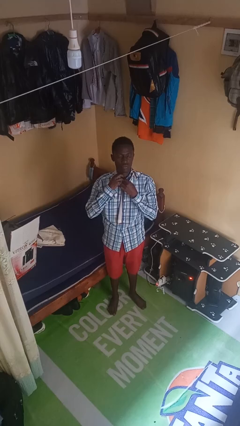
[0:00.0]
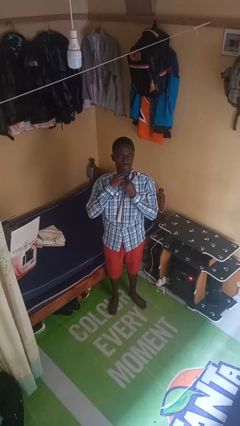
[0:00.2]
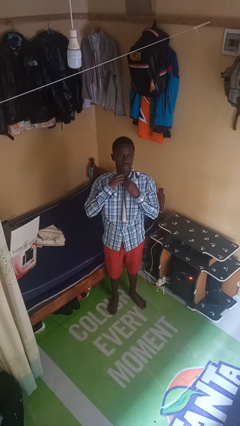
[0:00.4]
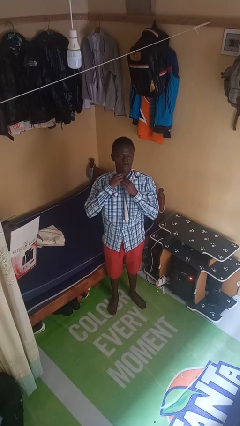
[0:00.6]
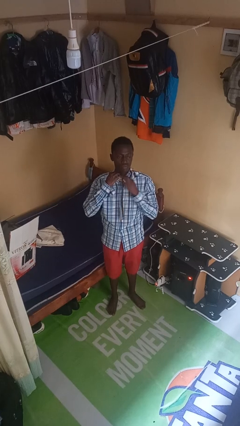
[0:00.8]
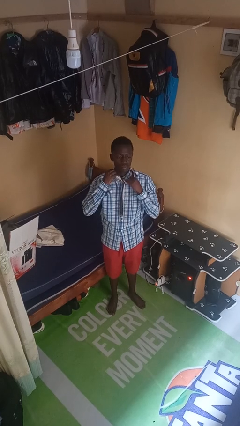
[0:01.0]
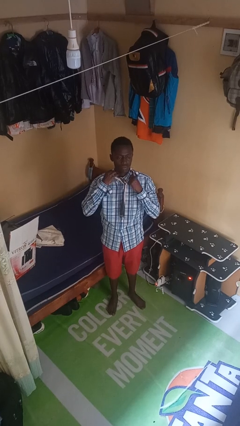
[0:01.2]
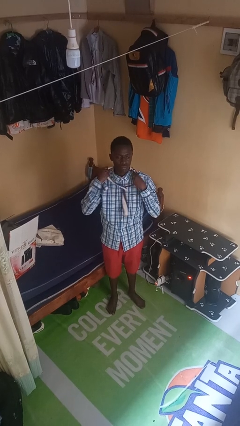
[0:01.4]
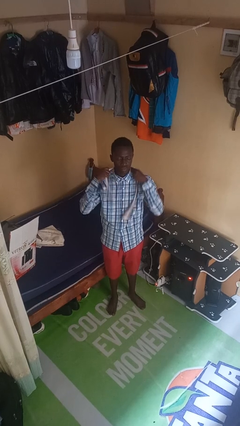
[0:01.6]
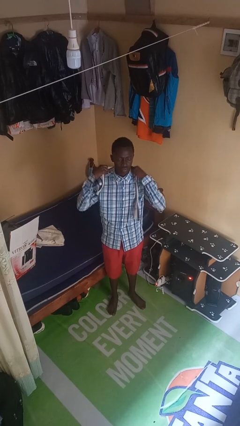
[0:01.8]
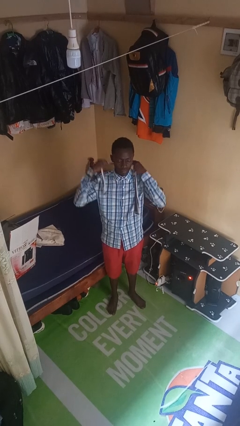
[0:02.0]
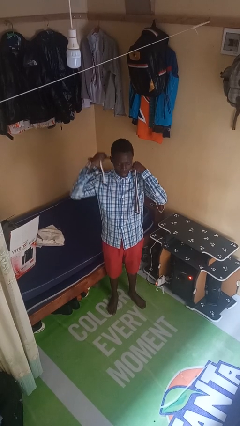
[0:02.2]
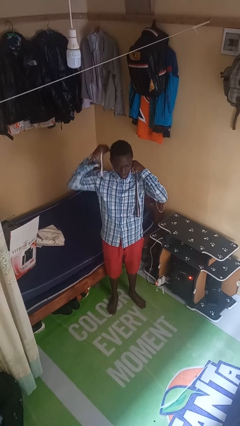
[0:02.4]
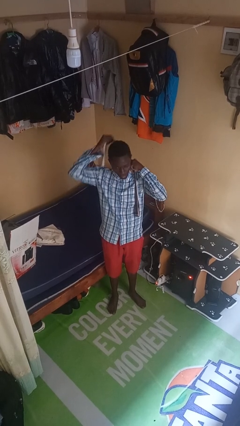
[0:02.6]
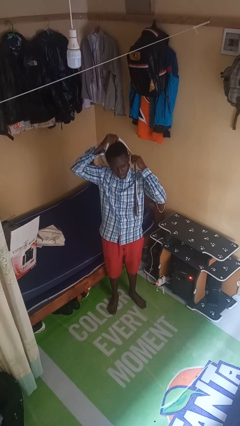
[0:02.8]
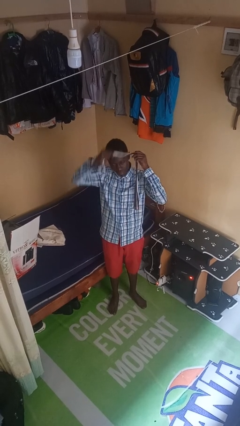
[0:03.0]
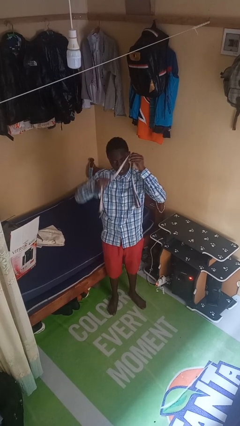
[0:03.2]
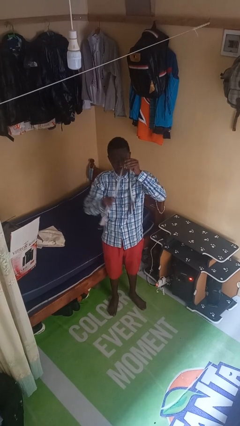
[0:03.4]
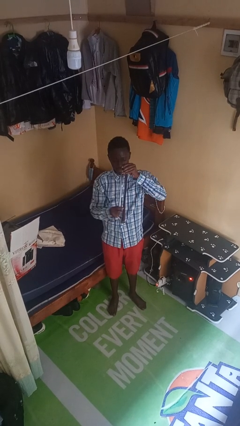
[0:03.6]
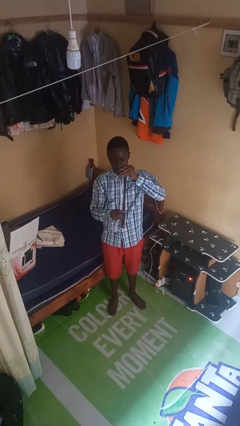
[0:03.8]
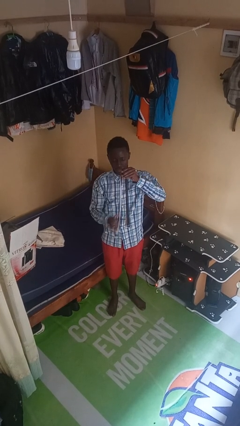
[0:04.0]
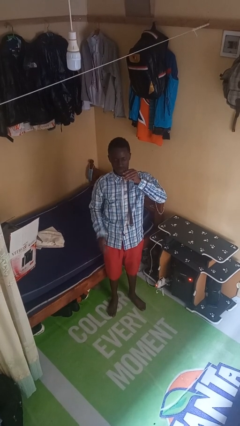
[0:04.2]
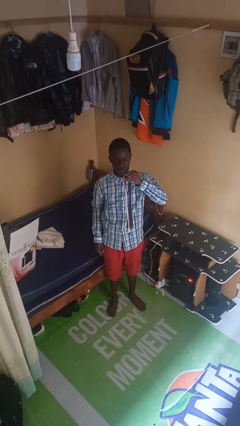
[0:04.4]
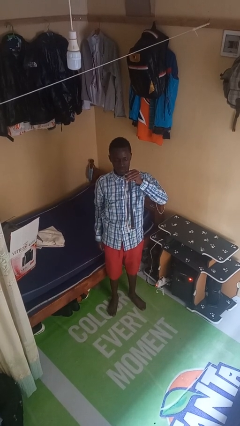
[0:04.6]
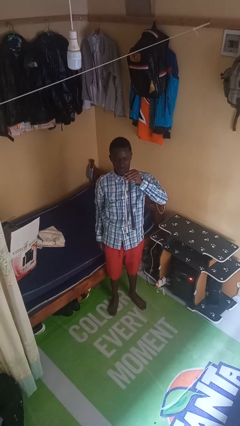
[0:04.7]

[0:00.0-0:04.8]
person takes off necktie

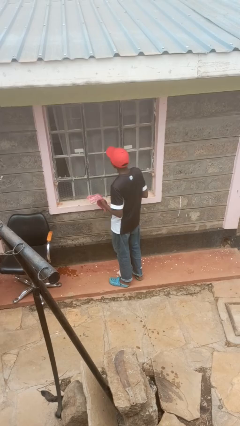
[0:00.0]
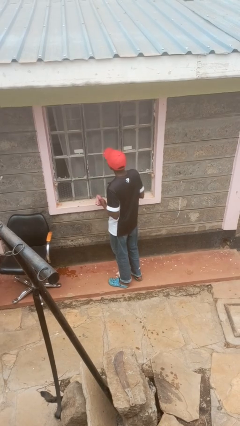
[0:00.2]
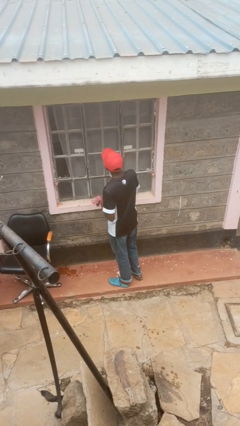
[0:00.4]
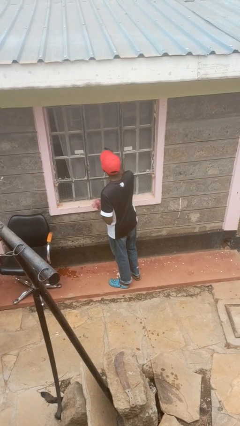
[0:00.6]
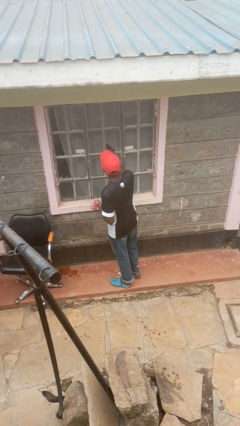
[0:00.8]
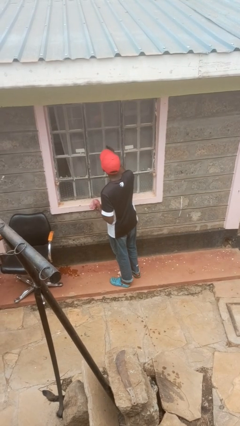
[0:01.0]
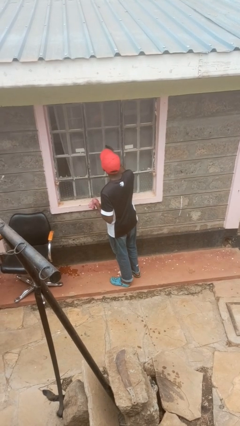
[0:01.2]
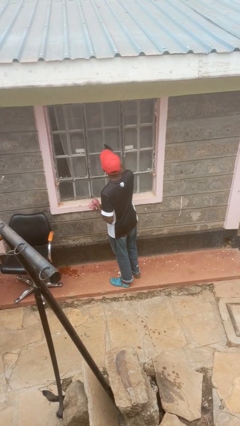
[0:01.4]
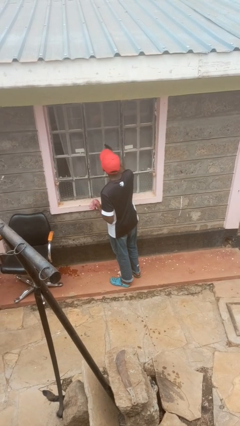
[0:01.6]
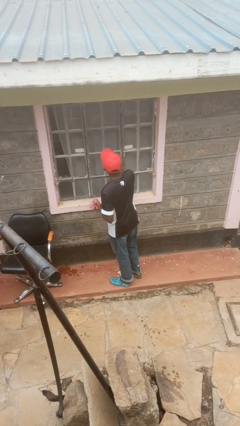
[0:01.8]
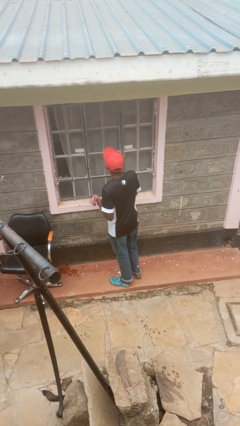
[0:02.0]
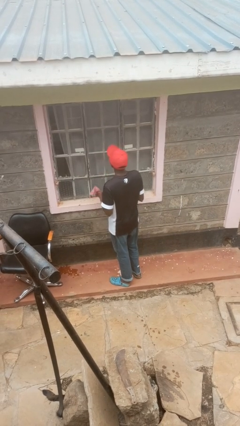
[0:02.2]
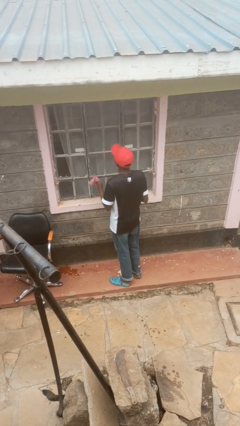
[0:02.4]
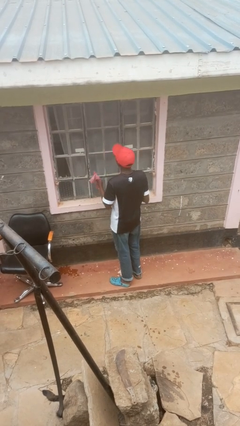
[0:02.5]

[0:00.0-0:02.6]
person sprays from bottle

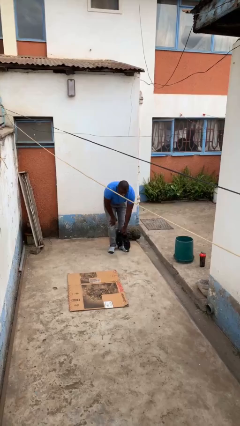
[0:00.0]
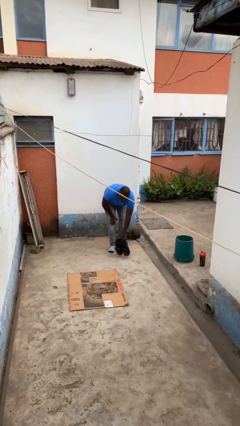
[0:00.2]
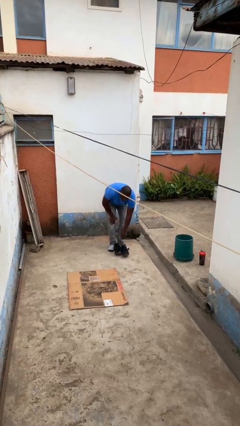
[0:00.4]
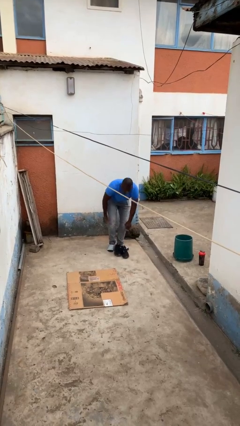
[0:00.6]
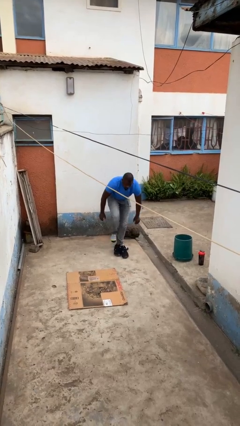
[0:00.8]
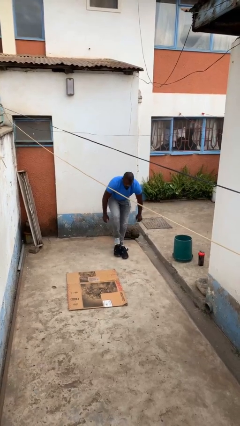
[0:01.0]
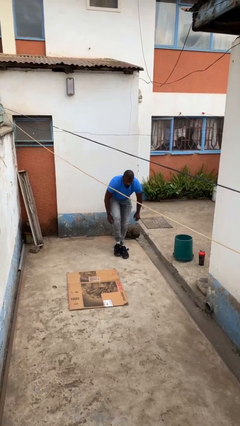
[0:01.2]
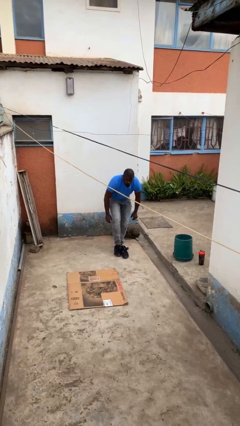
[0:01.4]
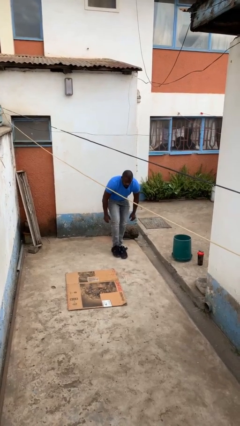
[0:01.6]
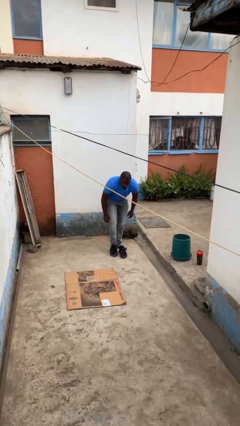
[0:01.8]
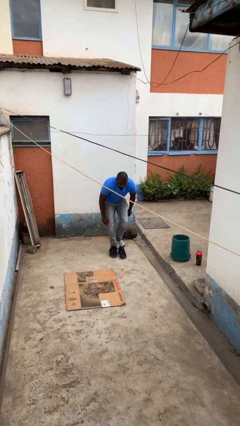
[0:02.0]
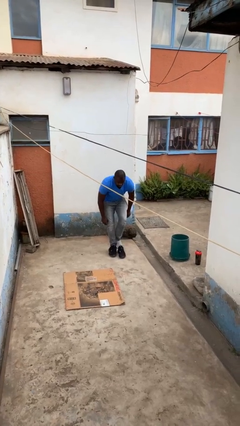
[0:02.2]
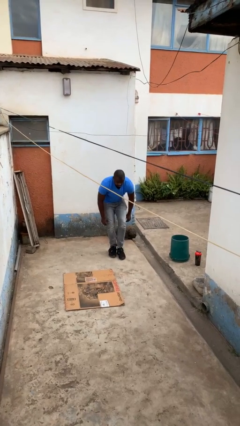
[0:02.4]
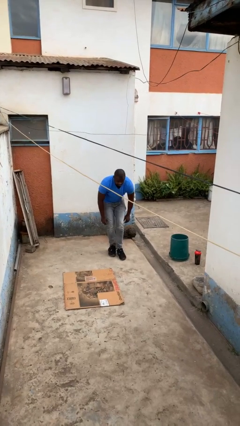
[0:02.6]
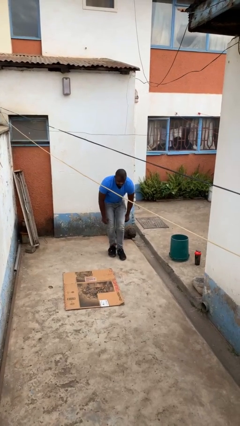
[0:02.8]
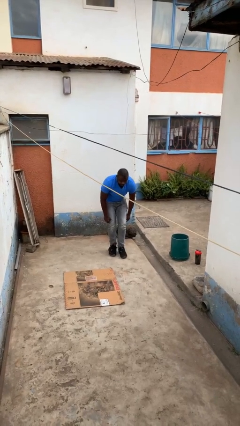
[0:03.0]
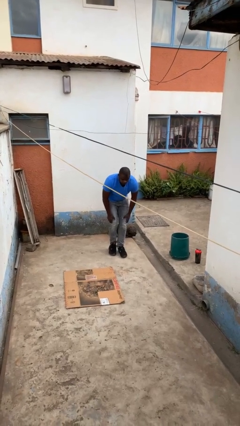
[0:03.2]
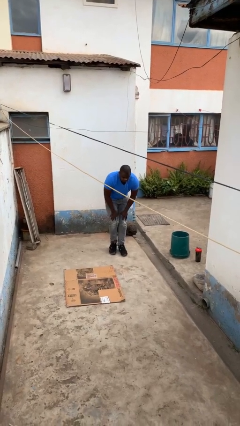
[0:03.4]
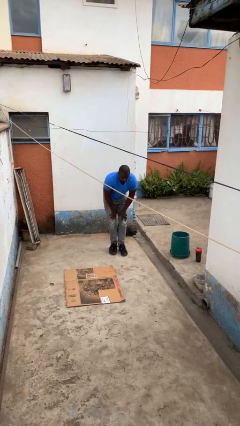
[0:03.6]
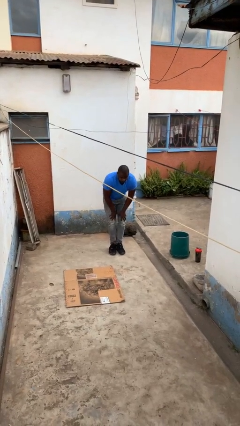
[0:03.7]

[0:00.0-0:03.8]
person puts on shoes

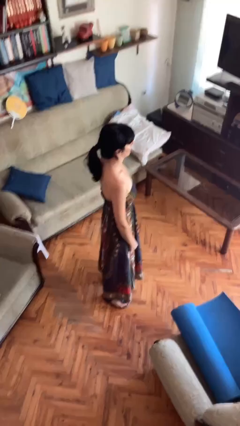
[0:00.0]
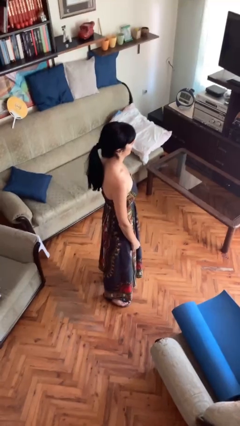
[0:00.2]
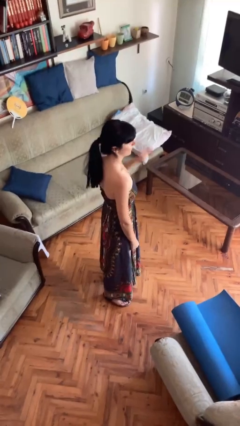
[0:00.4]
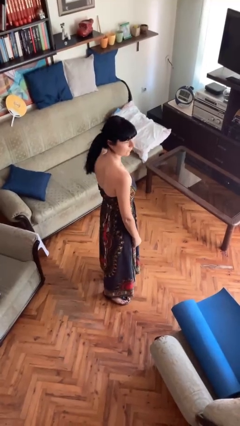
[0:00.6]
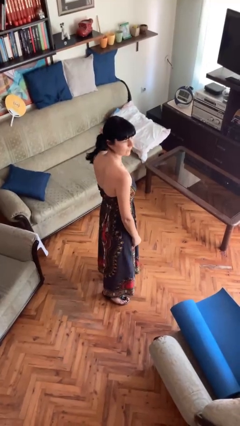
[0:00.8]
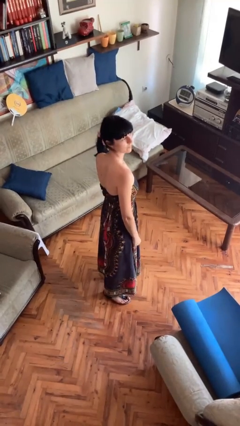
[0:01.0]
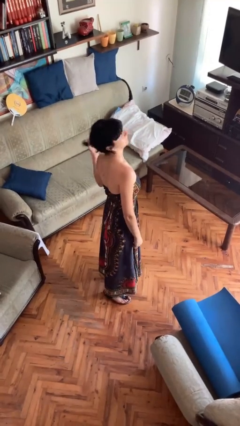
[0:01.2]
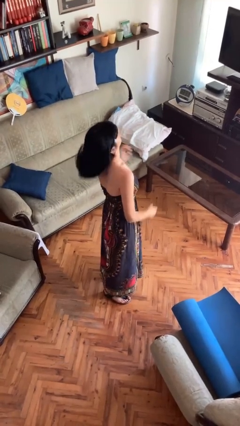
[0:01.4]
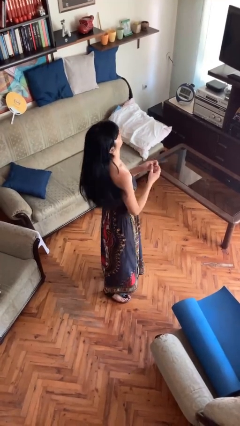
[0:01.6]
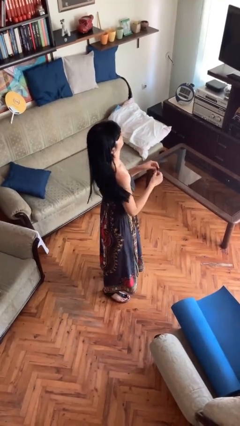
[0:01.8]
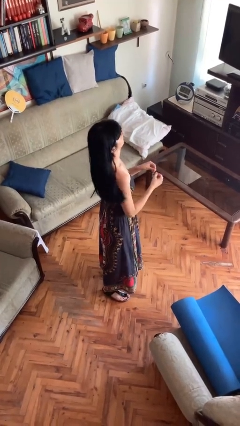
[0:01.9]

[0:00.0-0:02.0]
person takes off hairtie

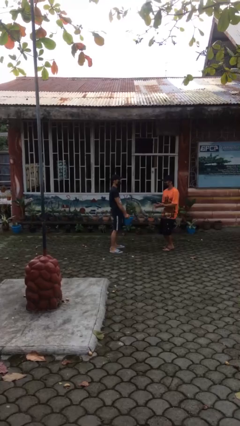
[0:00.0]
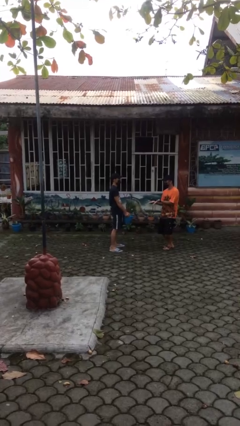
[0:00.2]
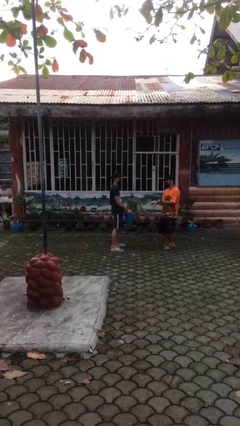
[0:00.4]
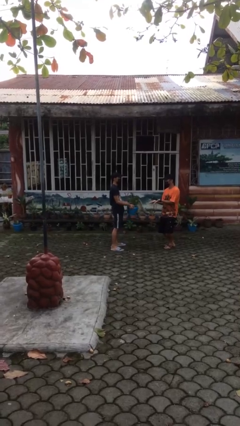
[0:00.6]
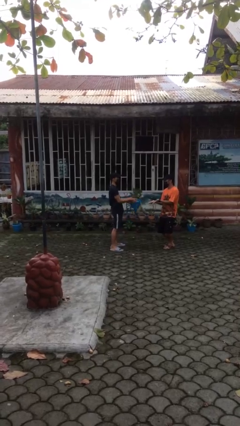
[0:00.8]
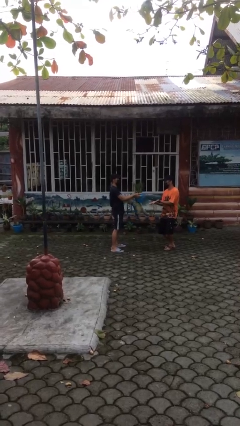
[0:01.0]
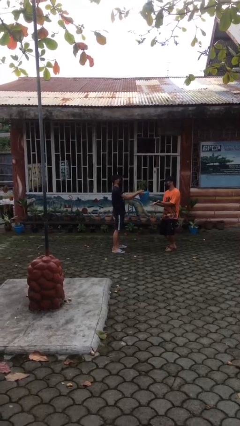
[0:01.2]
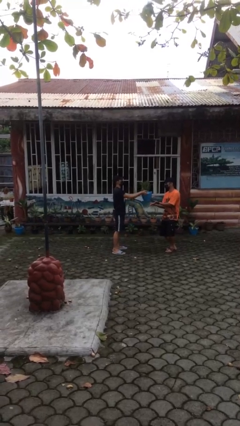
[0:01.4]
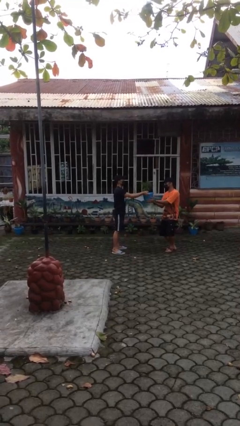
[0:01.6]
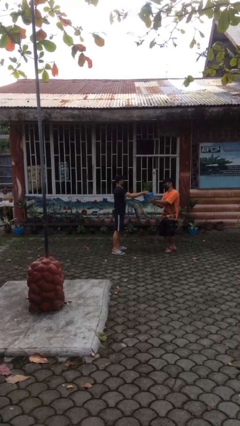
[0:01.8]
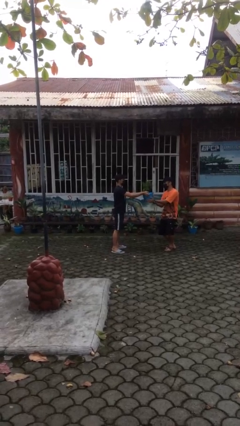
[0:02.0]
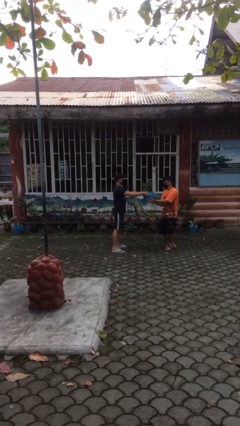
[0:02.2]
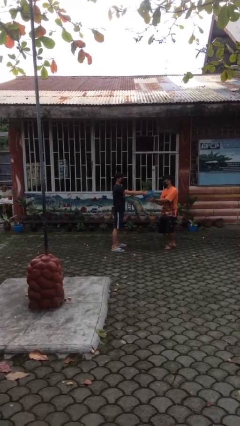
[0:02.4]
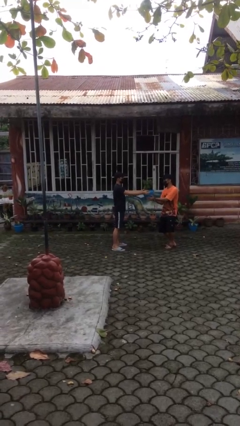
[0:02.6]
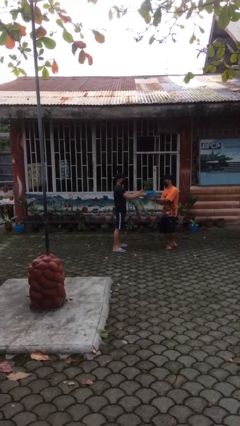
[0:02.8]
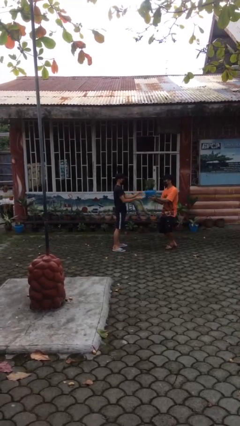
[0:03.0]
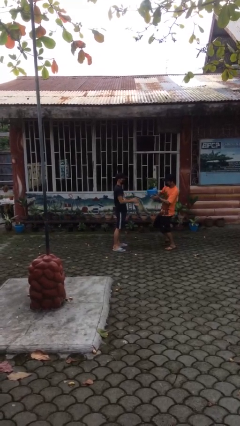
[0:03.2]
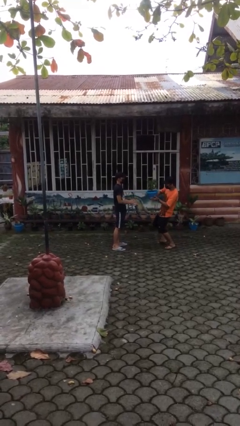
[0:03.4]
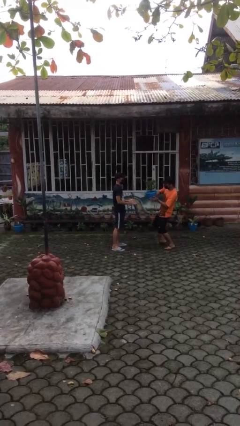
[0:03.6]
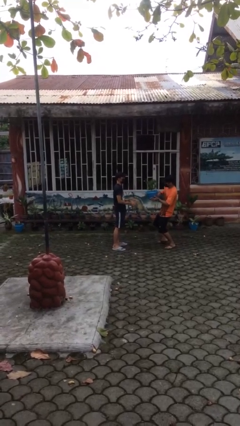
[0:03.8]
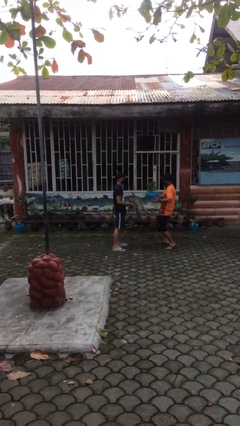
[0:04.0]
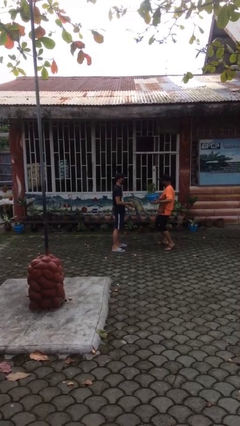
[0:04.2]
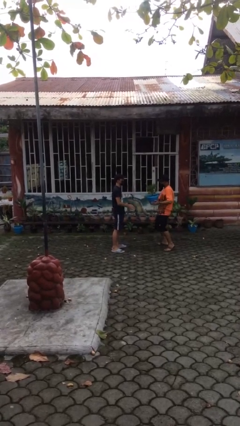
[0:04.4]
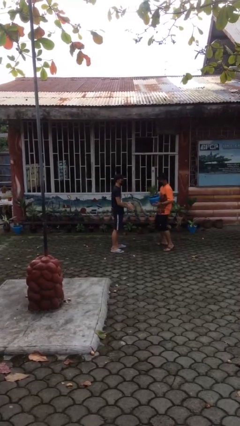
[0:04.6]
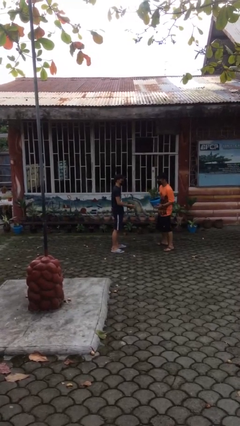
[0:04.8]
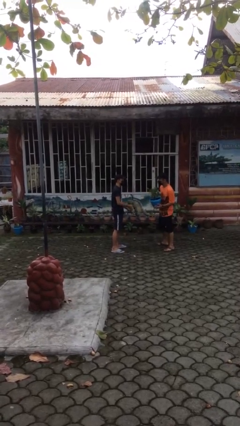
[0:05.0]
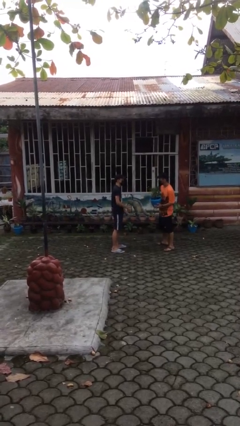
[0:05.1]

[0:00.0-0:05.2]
person transfers object to person
